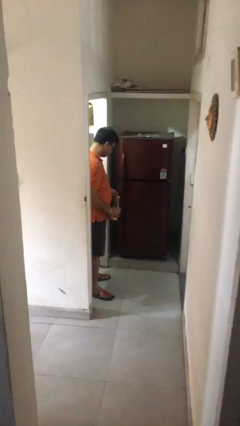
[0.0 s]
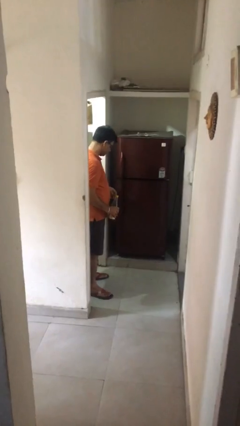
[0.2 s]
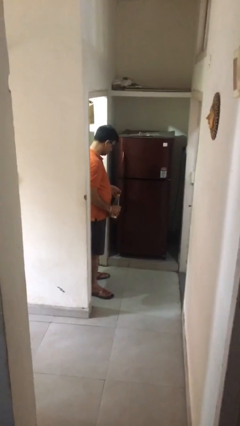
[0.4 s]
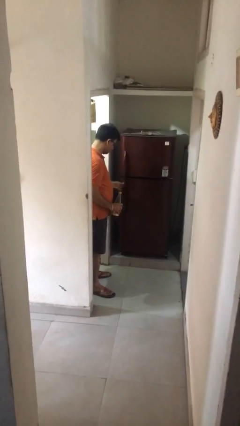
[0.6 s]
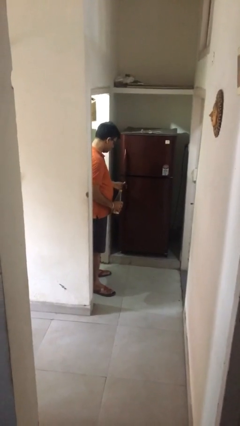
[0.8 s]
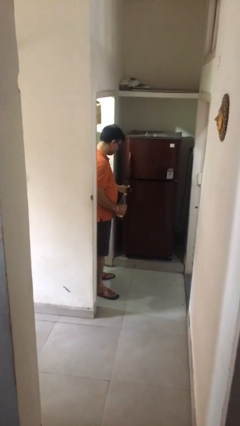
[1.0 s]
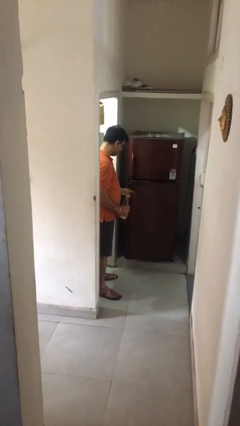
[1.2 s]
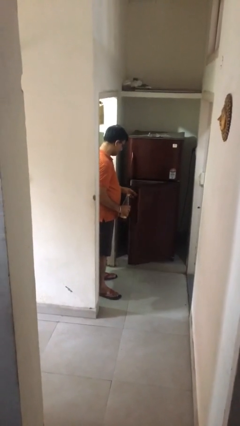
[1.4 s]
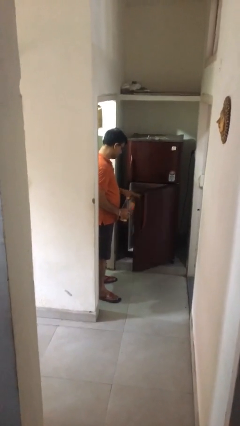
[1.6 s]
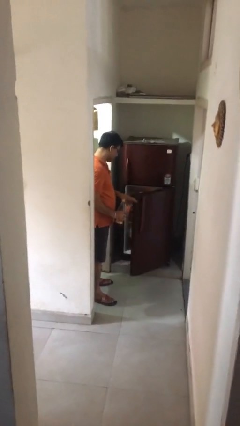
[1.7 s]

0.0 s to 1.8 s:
person opens refrigerator

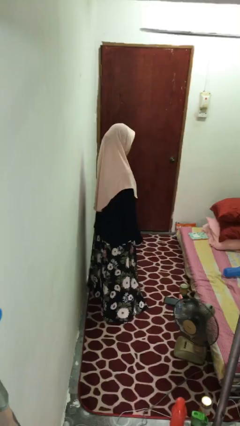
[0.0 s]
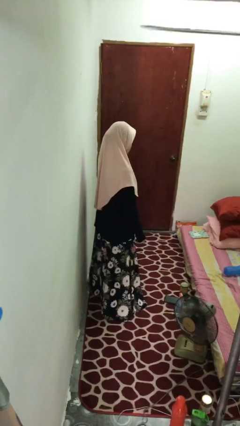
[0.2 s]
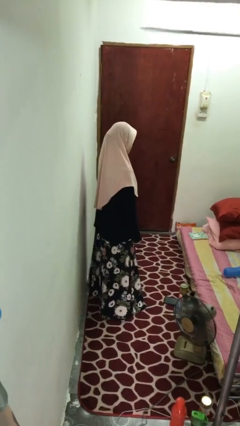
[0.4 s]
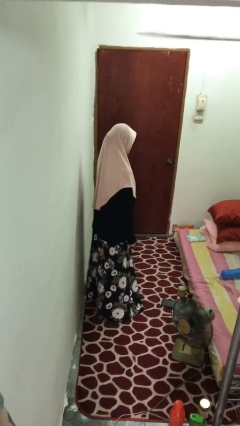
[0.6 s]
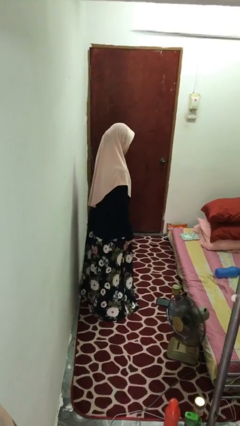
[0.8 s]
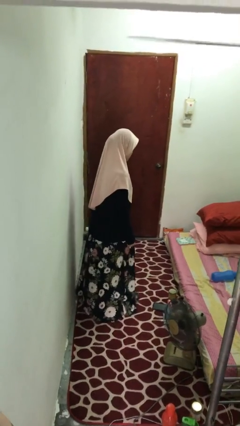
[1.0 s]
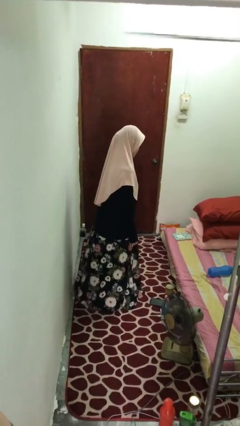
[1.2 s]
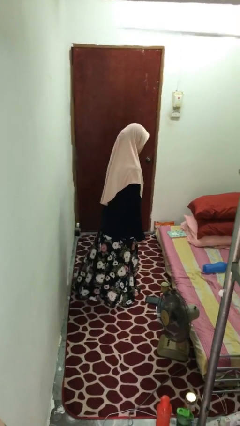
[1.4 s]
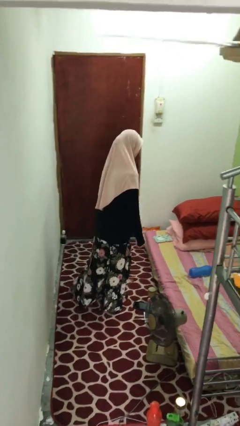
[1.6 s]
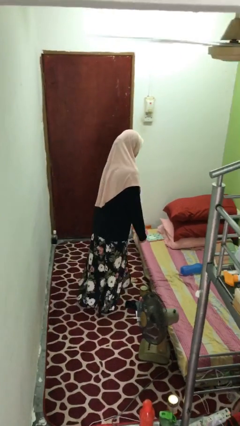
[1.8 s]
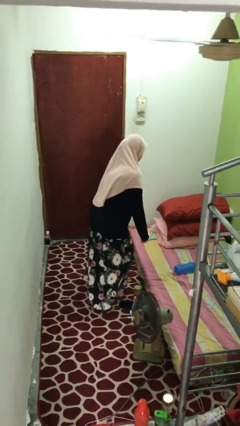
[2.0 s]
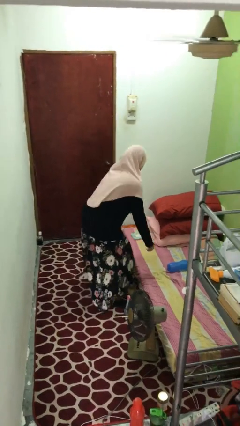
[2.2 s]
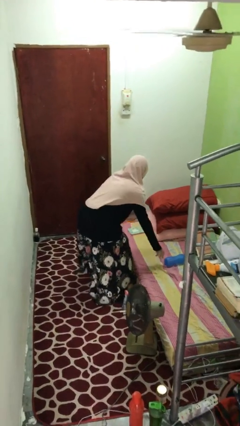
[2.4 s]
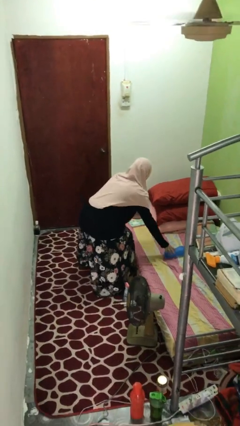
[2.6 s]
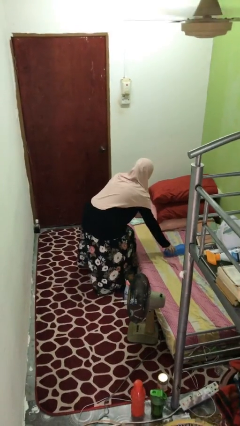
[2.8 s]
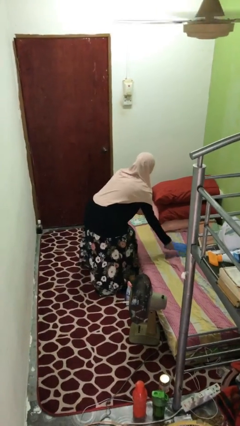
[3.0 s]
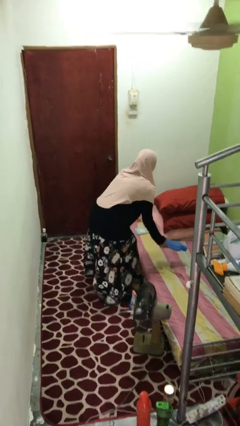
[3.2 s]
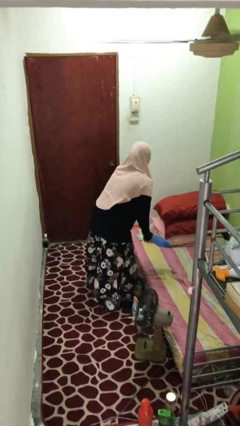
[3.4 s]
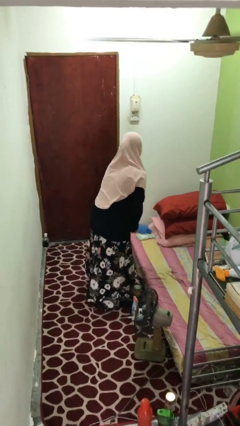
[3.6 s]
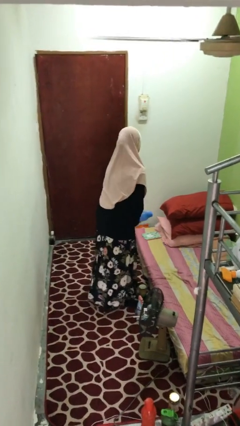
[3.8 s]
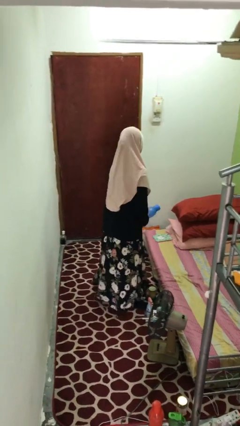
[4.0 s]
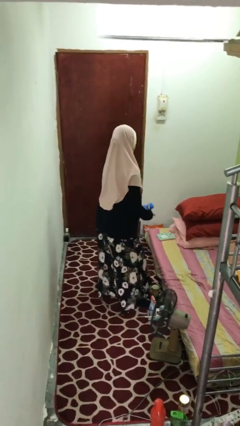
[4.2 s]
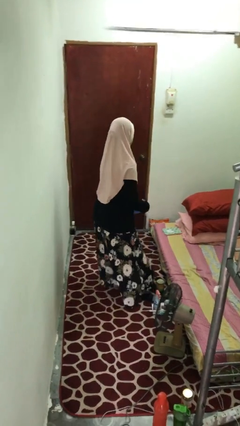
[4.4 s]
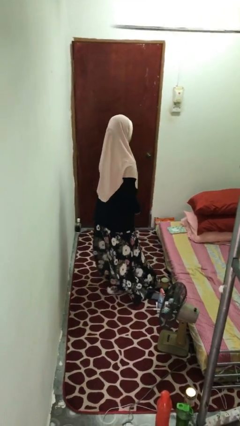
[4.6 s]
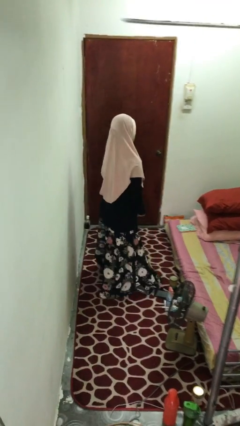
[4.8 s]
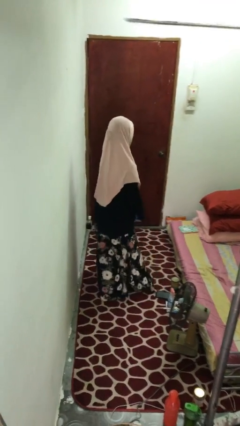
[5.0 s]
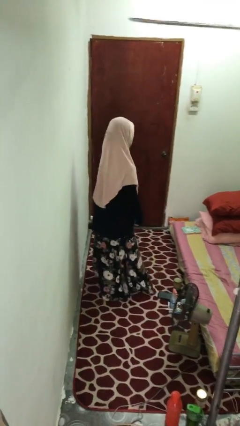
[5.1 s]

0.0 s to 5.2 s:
person picks up object from bed

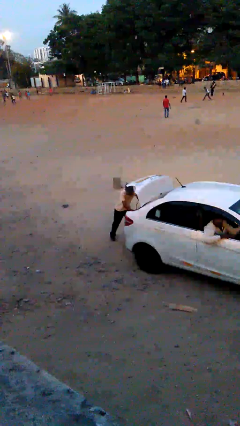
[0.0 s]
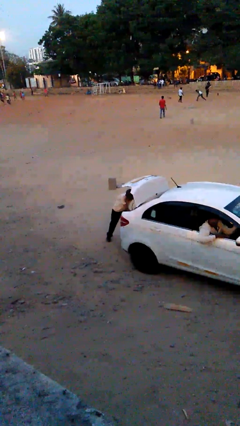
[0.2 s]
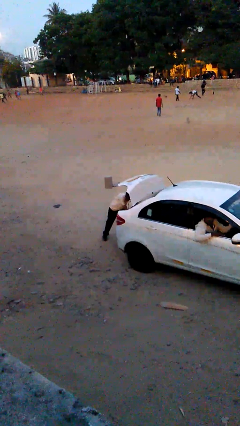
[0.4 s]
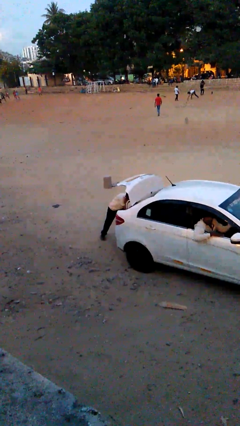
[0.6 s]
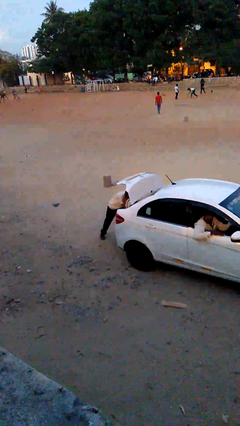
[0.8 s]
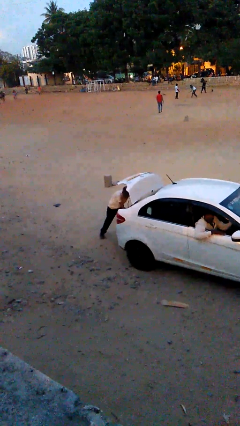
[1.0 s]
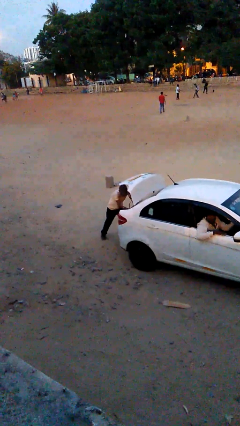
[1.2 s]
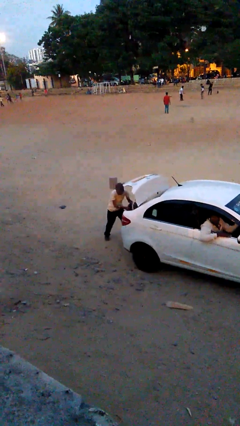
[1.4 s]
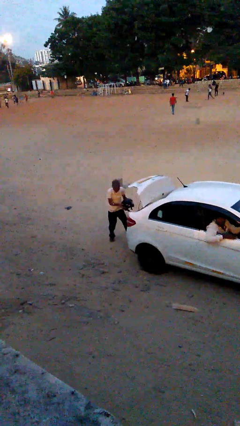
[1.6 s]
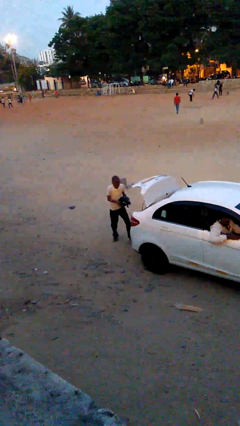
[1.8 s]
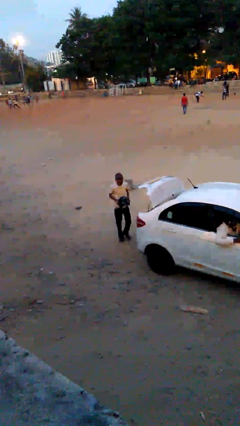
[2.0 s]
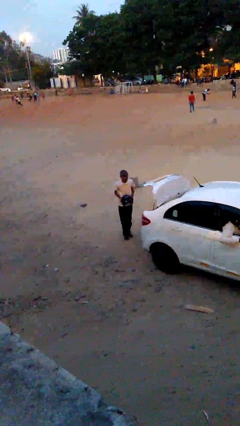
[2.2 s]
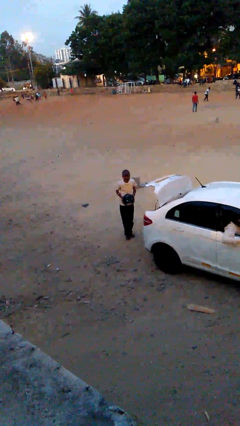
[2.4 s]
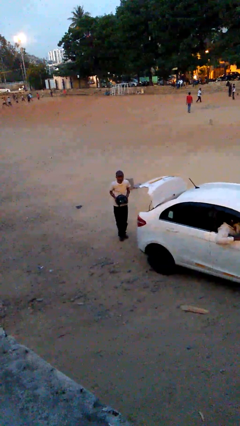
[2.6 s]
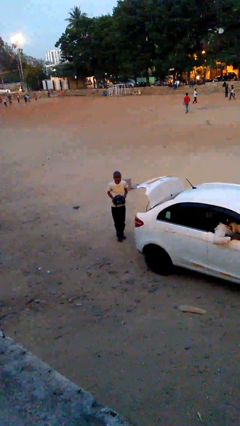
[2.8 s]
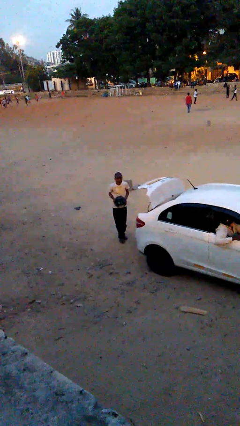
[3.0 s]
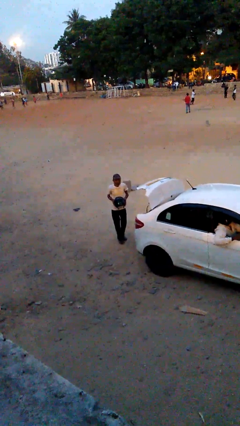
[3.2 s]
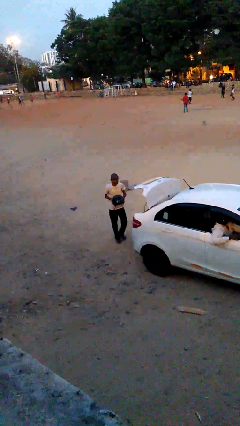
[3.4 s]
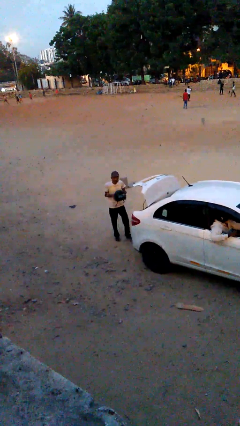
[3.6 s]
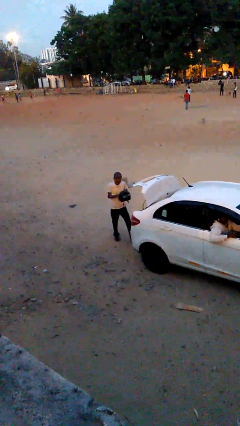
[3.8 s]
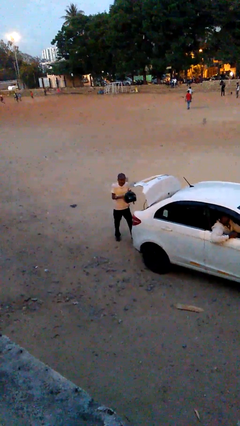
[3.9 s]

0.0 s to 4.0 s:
person unloads car

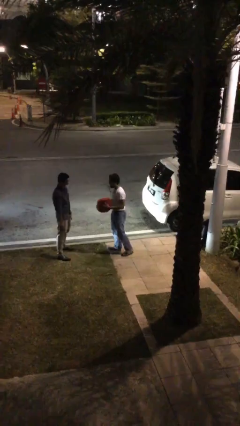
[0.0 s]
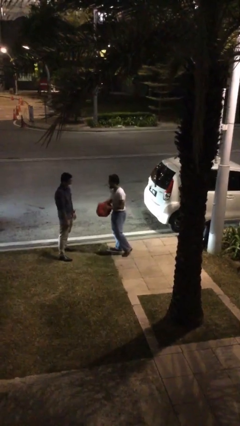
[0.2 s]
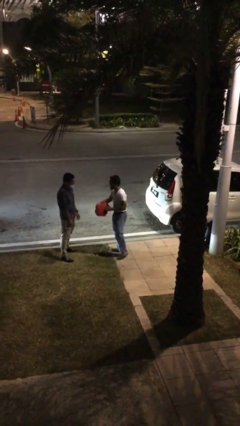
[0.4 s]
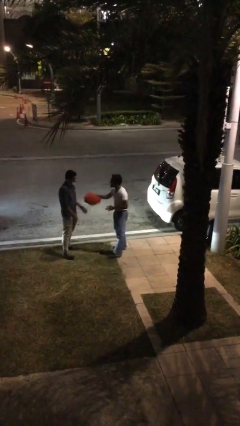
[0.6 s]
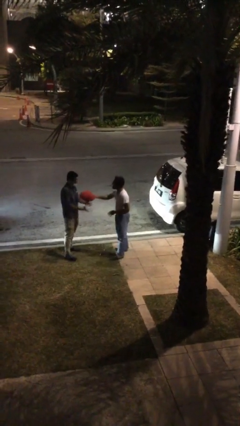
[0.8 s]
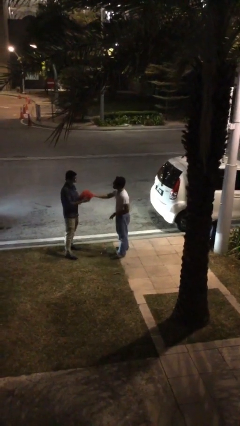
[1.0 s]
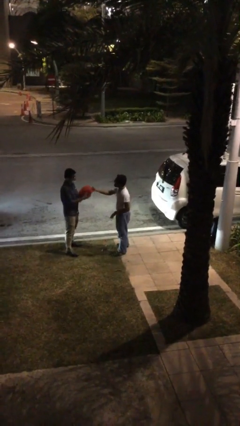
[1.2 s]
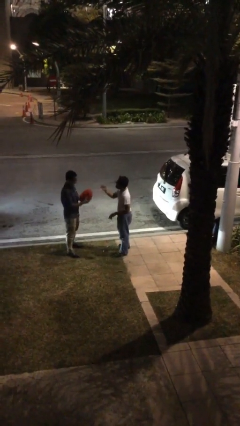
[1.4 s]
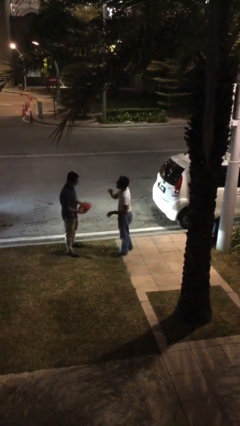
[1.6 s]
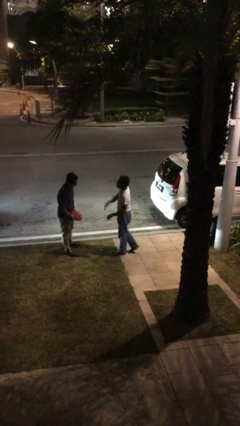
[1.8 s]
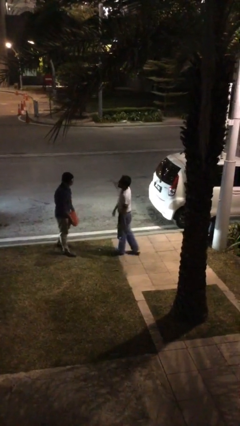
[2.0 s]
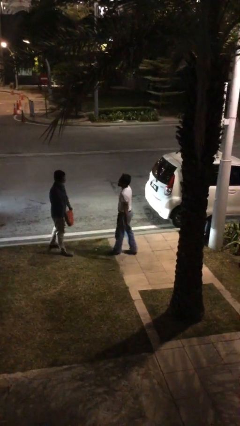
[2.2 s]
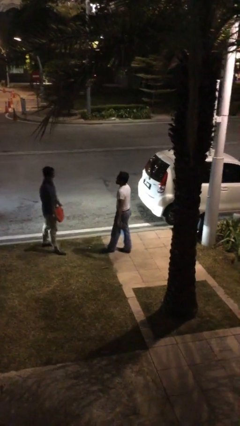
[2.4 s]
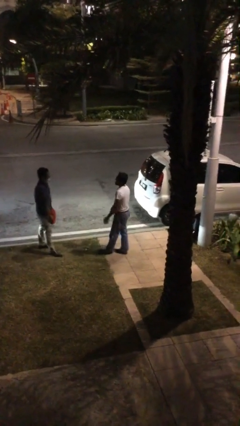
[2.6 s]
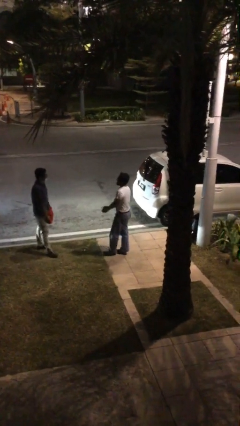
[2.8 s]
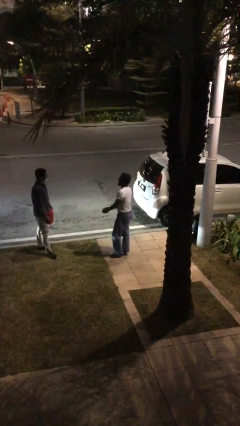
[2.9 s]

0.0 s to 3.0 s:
person transfers object to person

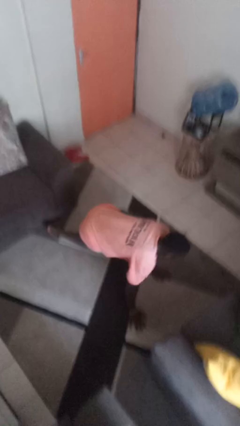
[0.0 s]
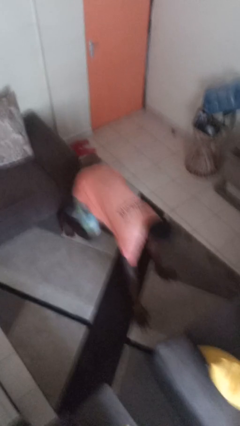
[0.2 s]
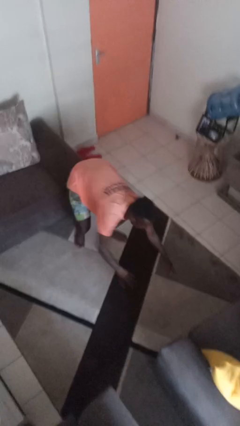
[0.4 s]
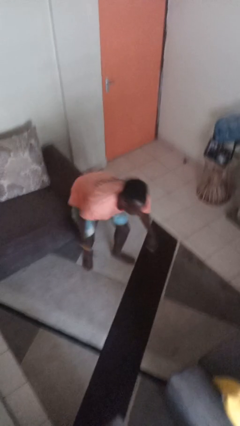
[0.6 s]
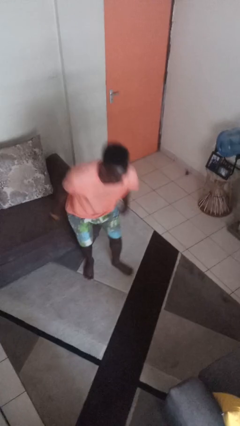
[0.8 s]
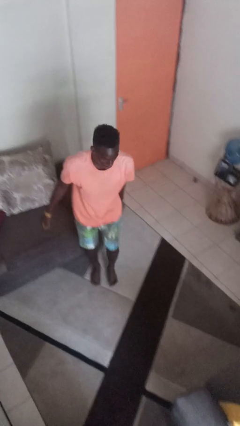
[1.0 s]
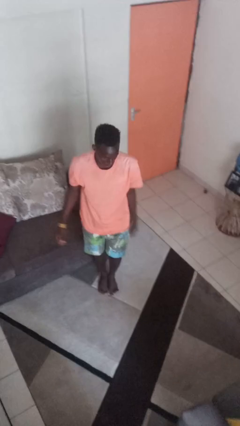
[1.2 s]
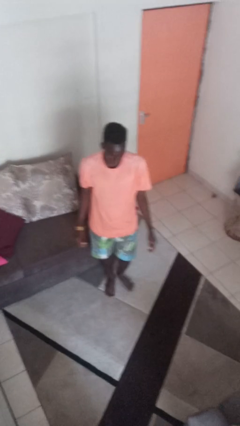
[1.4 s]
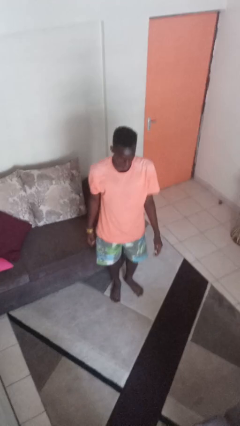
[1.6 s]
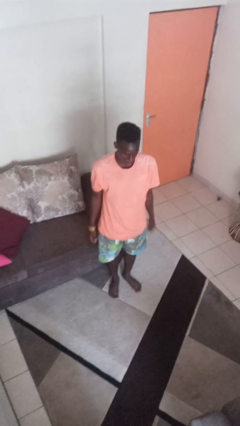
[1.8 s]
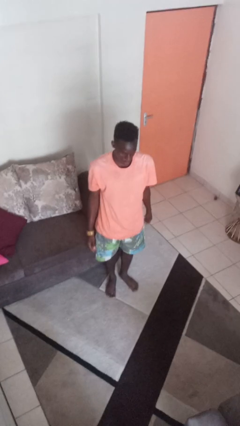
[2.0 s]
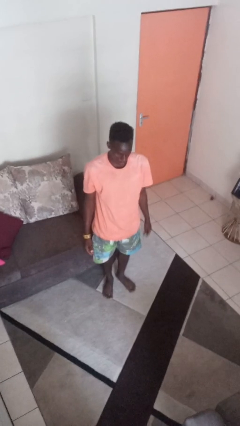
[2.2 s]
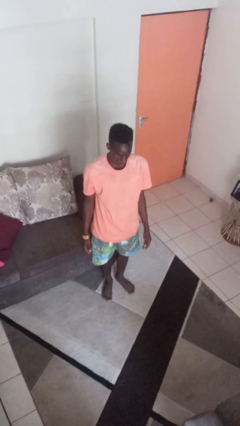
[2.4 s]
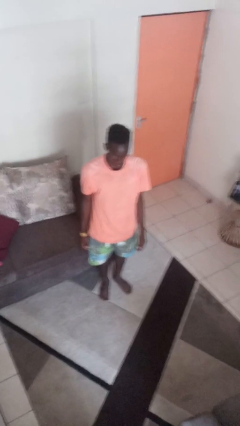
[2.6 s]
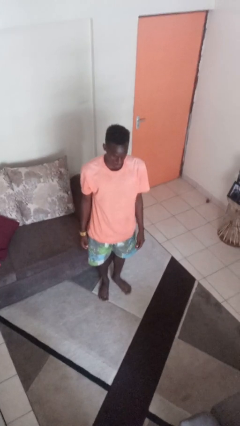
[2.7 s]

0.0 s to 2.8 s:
person stands up from floor

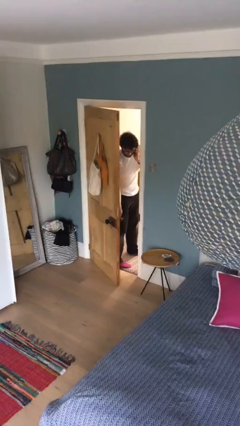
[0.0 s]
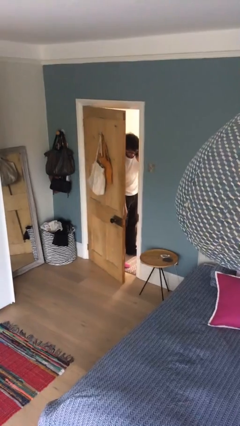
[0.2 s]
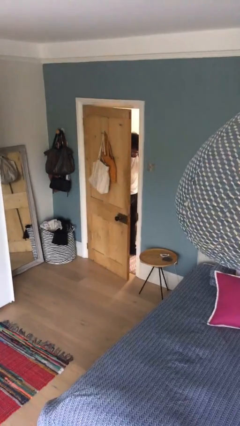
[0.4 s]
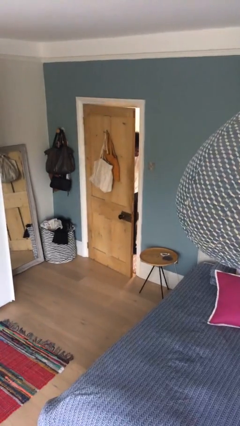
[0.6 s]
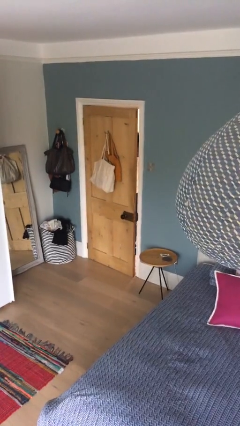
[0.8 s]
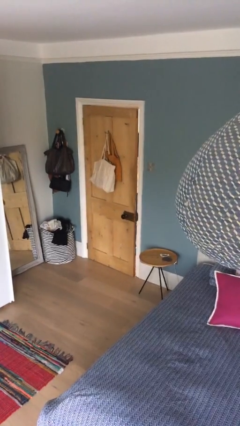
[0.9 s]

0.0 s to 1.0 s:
person closes facility door

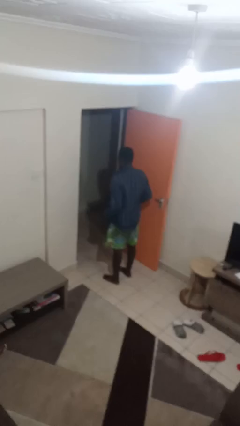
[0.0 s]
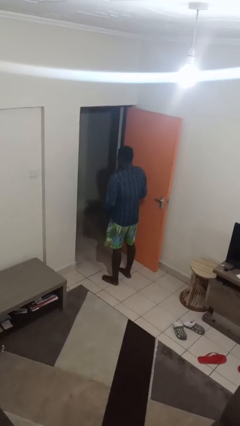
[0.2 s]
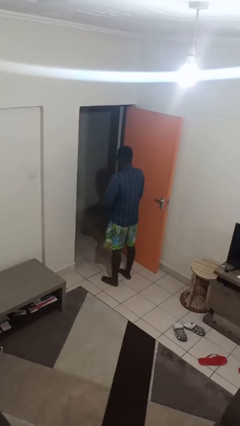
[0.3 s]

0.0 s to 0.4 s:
person zips up jacket
